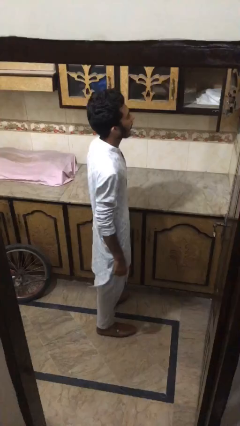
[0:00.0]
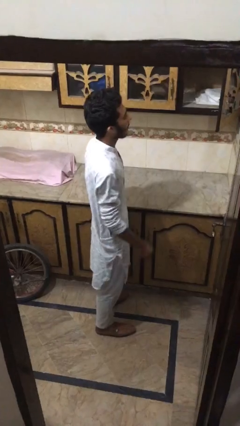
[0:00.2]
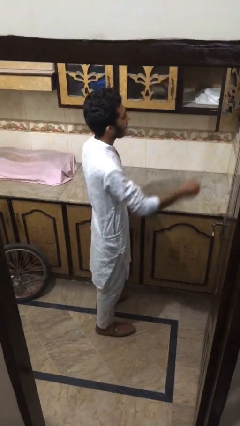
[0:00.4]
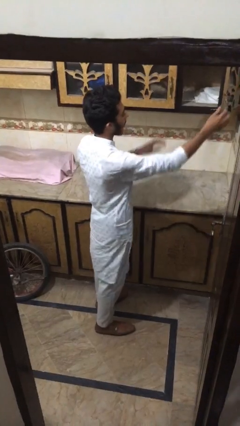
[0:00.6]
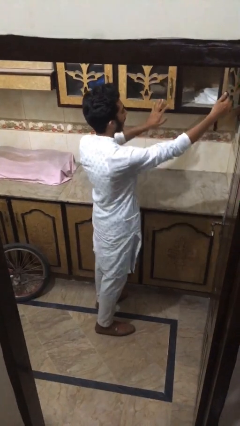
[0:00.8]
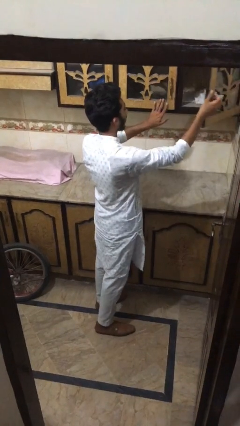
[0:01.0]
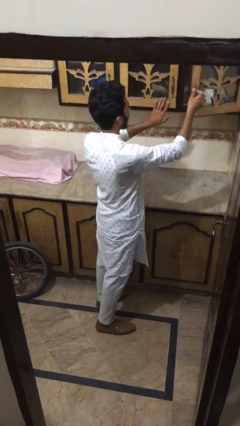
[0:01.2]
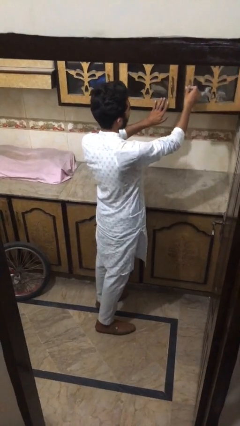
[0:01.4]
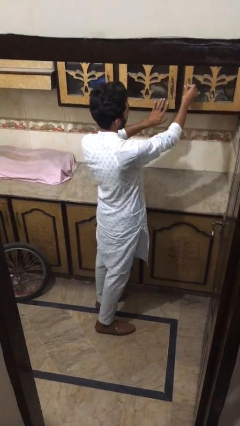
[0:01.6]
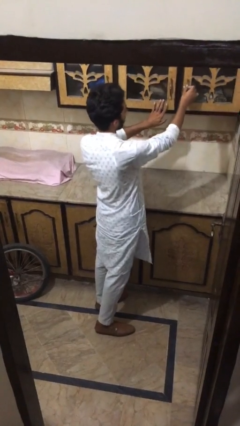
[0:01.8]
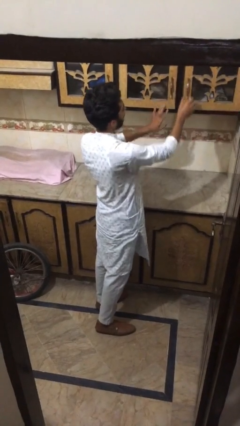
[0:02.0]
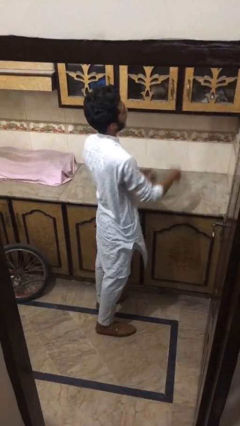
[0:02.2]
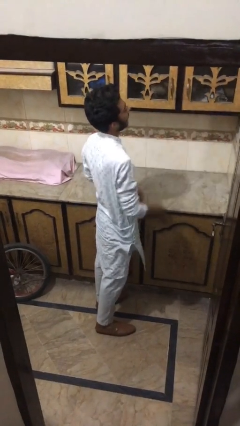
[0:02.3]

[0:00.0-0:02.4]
person closes cabinet

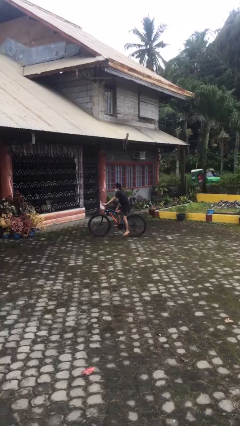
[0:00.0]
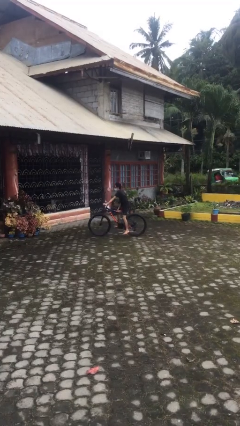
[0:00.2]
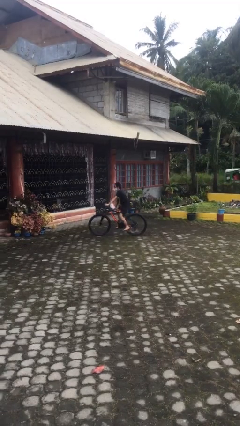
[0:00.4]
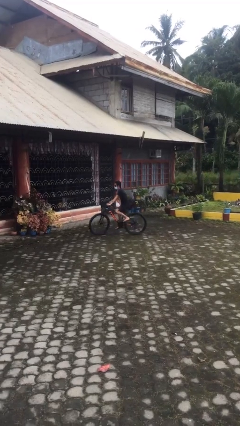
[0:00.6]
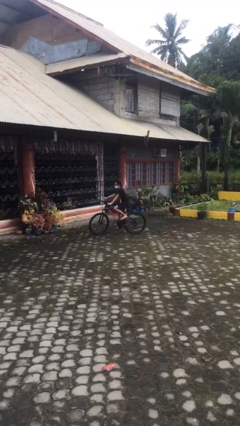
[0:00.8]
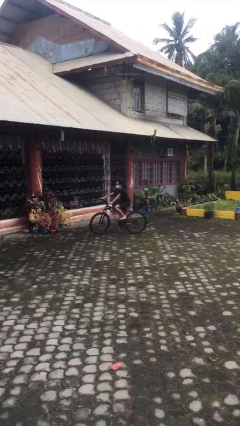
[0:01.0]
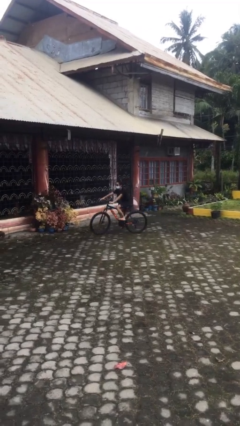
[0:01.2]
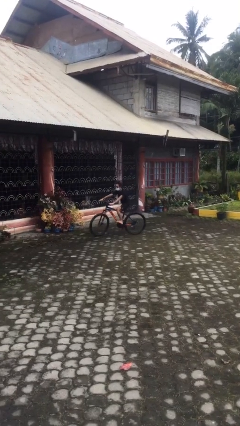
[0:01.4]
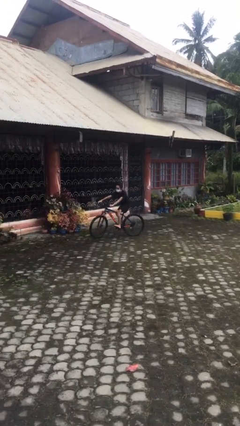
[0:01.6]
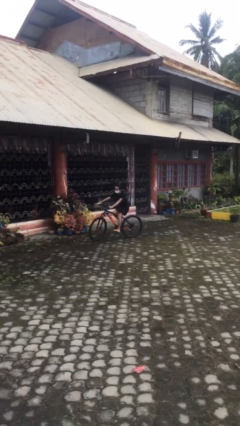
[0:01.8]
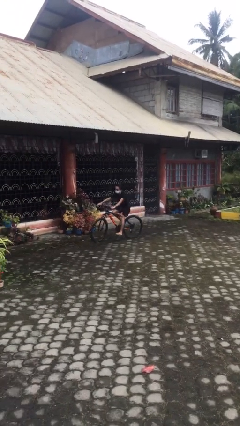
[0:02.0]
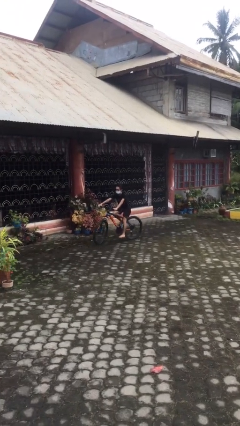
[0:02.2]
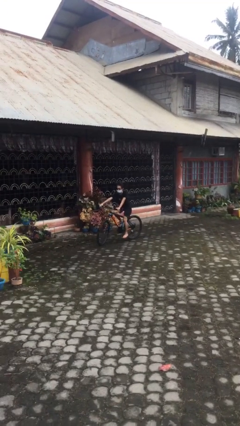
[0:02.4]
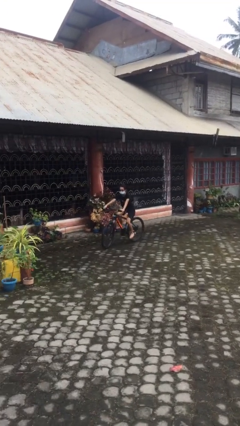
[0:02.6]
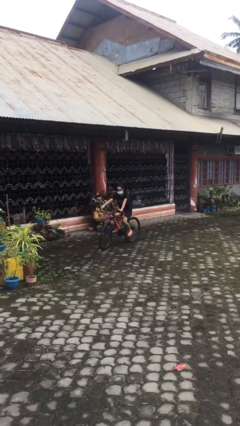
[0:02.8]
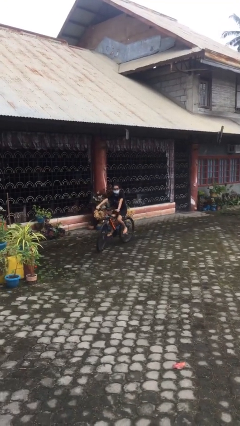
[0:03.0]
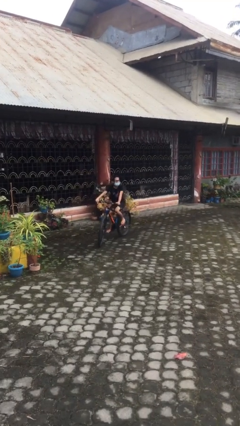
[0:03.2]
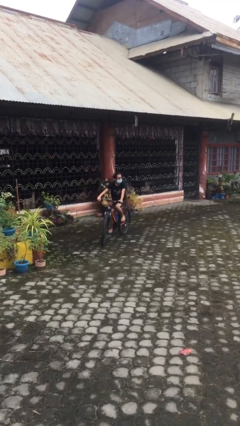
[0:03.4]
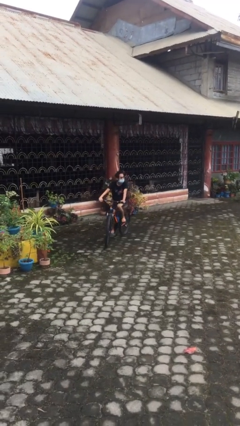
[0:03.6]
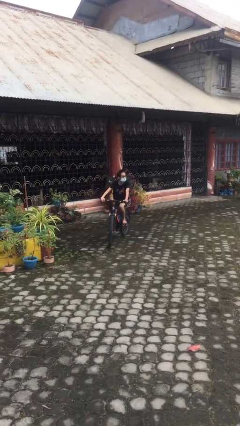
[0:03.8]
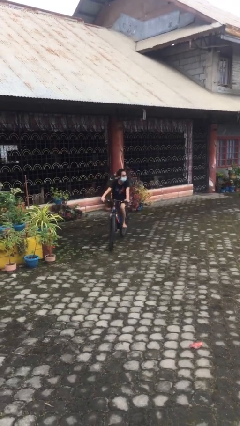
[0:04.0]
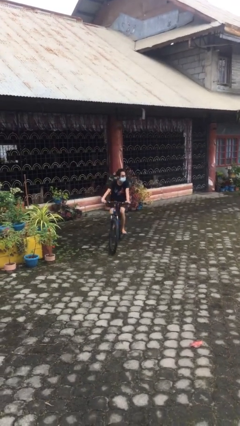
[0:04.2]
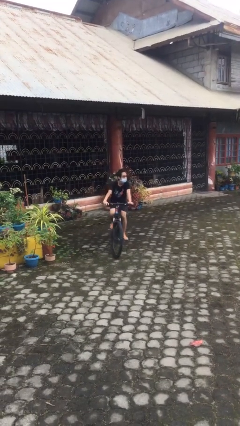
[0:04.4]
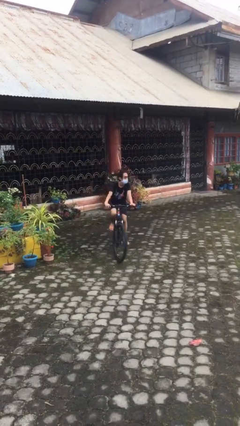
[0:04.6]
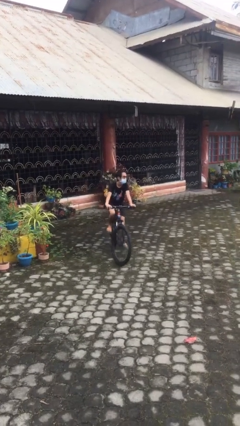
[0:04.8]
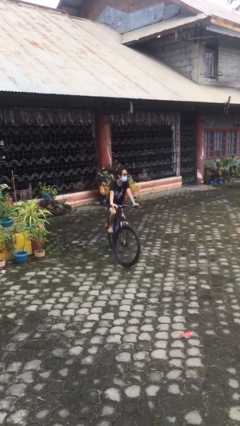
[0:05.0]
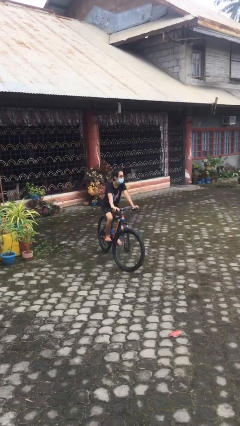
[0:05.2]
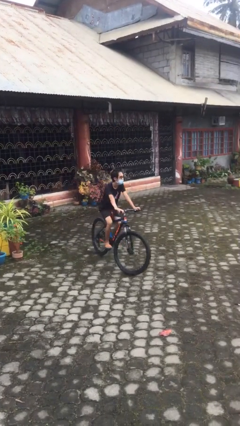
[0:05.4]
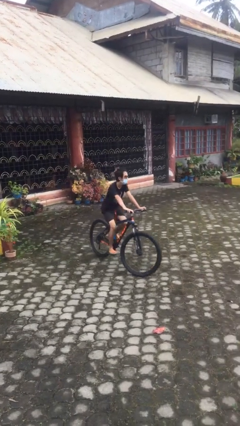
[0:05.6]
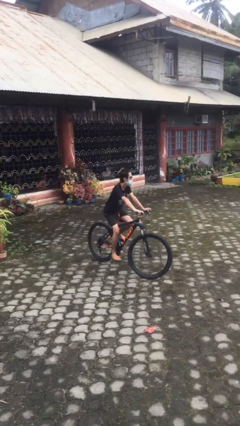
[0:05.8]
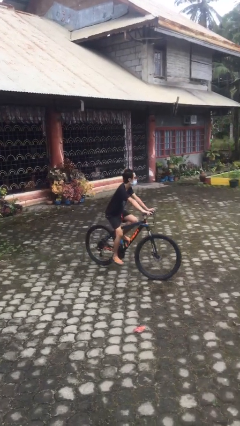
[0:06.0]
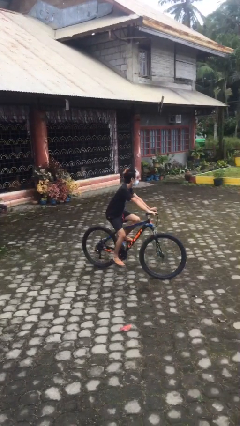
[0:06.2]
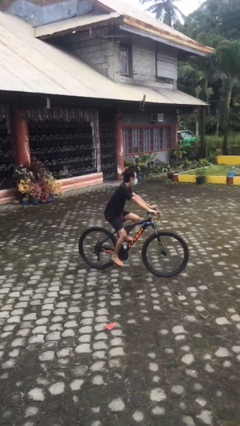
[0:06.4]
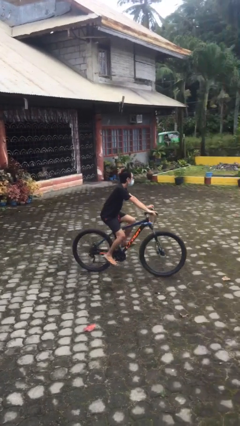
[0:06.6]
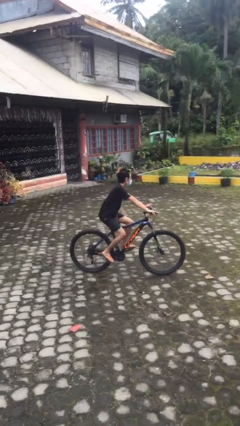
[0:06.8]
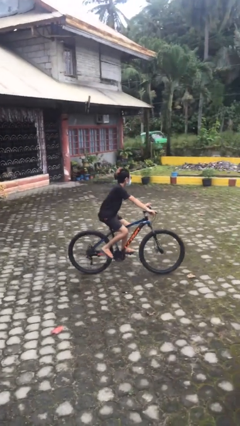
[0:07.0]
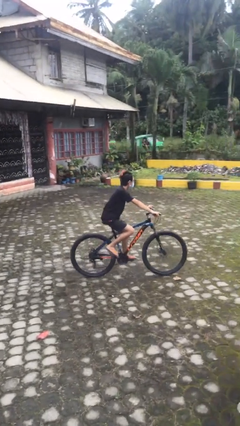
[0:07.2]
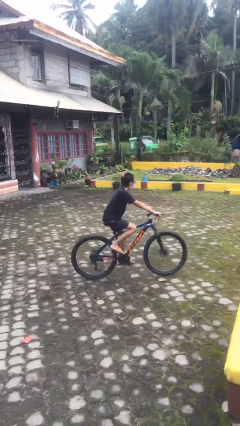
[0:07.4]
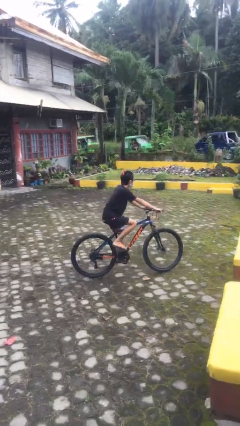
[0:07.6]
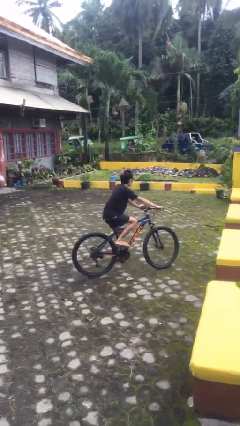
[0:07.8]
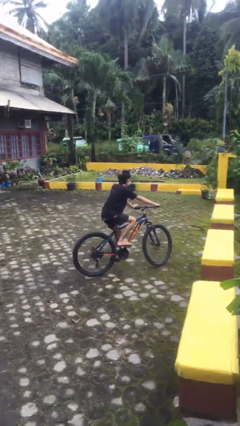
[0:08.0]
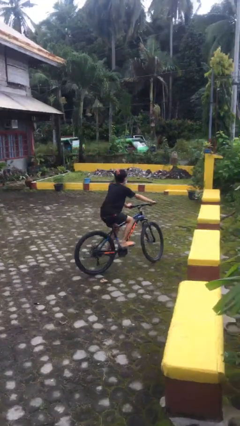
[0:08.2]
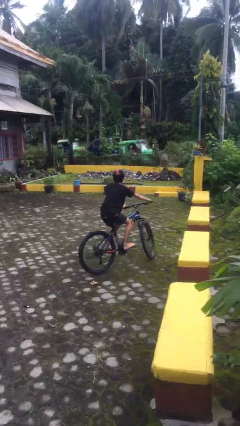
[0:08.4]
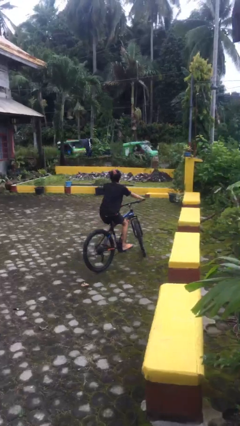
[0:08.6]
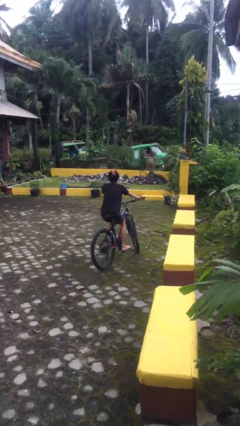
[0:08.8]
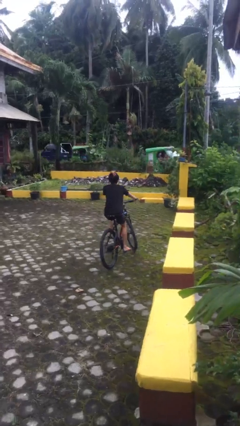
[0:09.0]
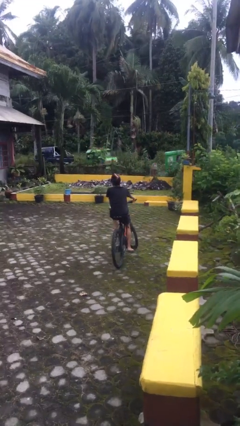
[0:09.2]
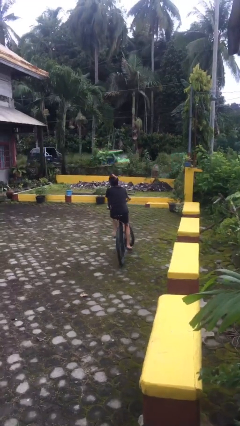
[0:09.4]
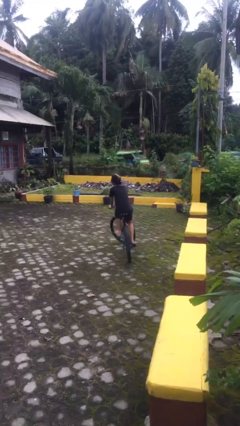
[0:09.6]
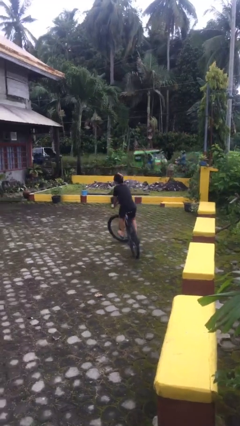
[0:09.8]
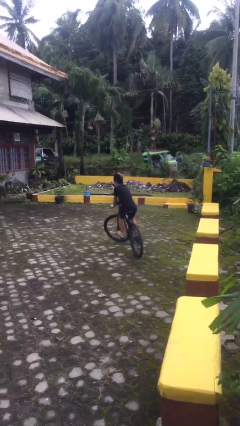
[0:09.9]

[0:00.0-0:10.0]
person rides bicycle

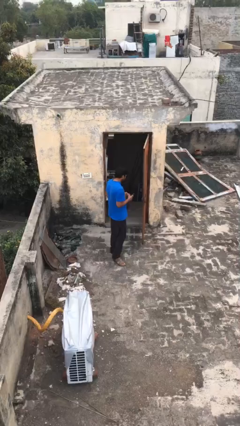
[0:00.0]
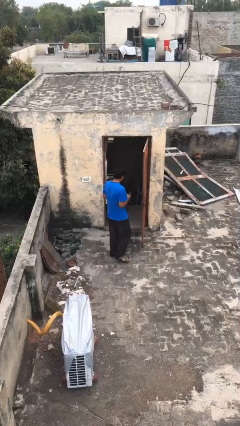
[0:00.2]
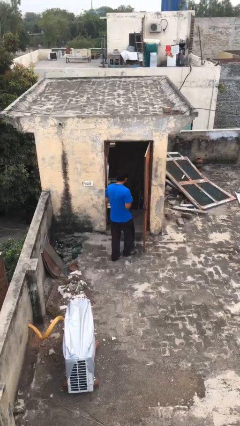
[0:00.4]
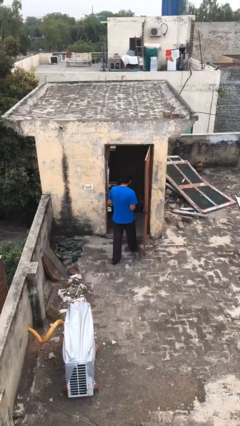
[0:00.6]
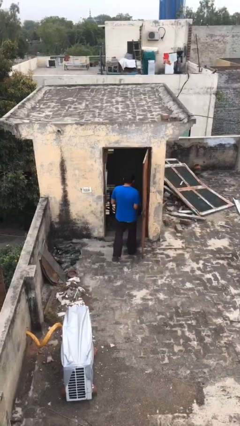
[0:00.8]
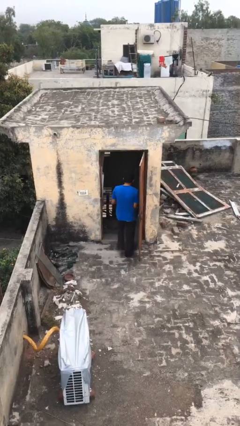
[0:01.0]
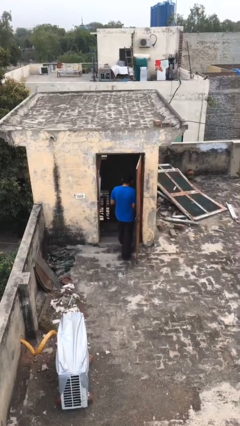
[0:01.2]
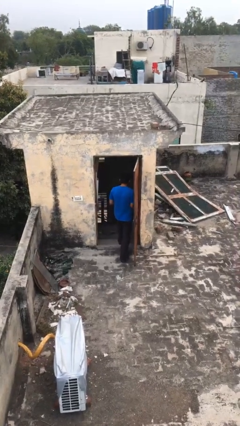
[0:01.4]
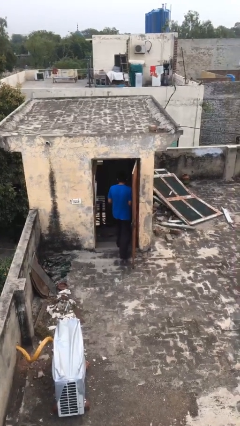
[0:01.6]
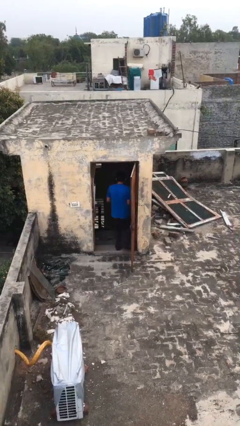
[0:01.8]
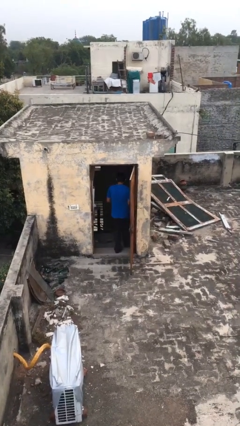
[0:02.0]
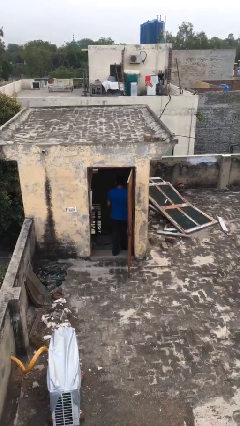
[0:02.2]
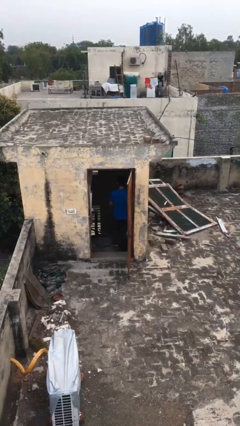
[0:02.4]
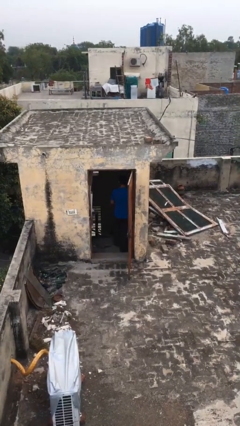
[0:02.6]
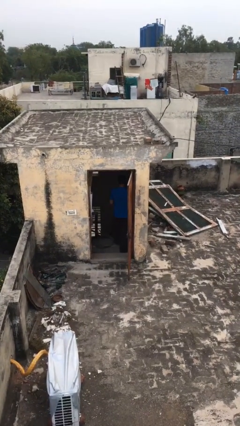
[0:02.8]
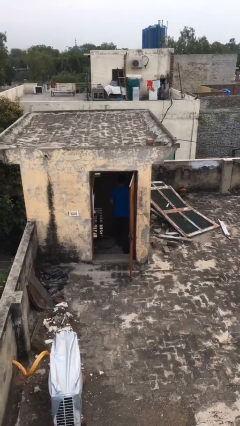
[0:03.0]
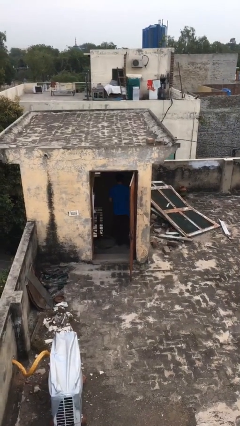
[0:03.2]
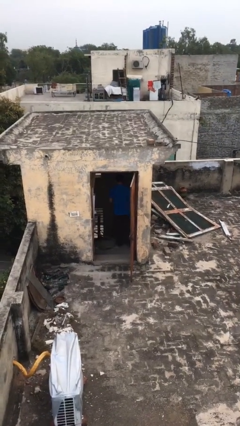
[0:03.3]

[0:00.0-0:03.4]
person exits scene through structure

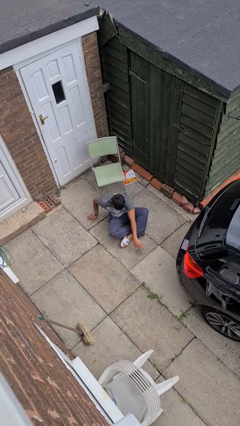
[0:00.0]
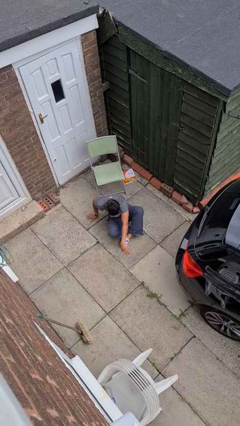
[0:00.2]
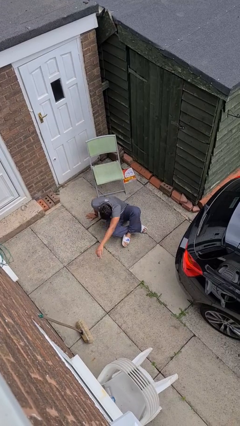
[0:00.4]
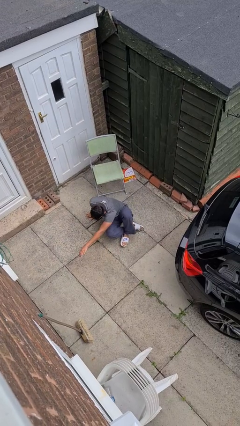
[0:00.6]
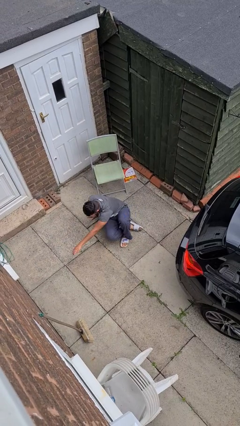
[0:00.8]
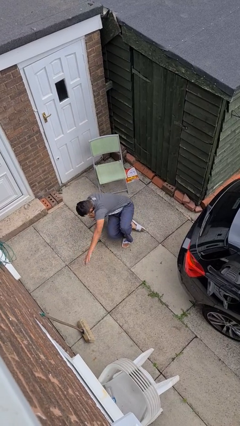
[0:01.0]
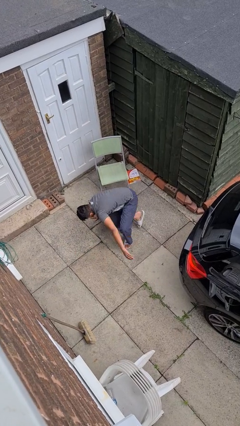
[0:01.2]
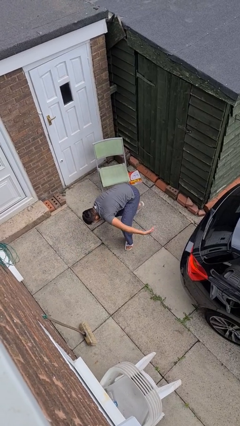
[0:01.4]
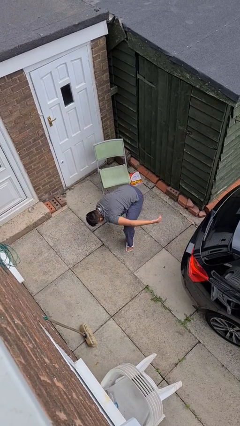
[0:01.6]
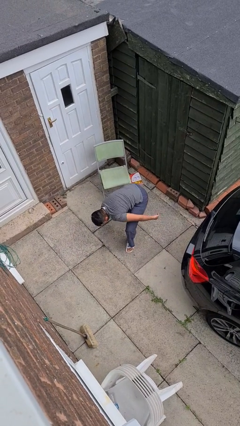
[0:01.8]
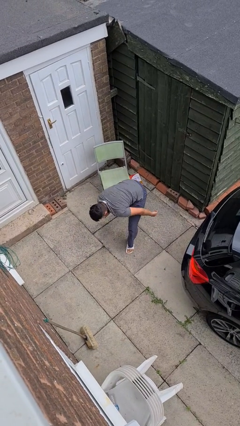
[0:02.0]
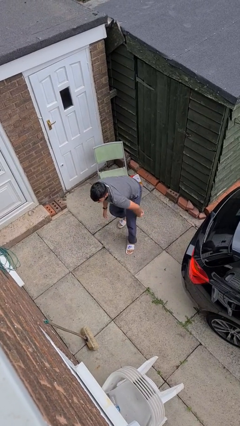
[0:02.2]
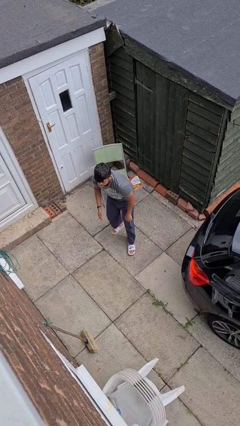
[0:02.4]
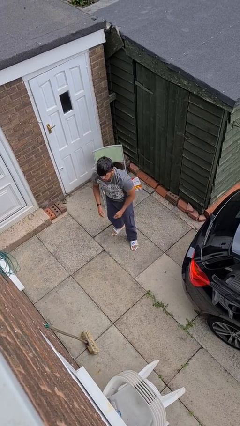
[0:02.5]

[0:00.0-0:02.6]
person stands up from floor
